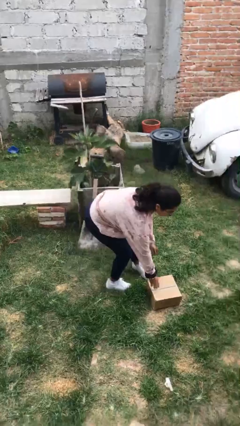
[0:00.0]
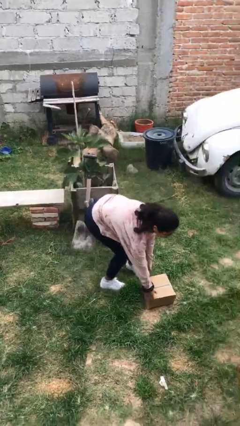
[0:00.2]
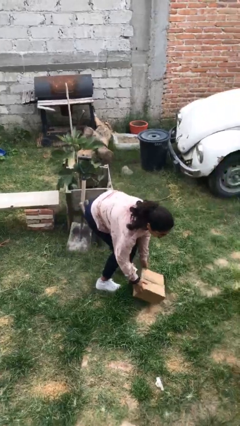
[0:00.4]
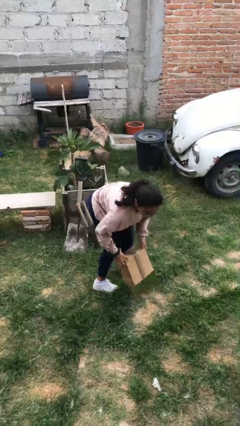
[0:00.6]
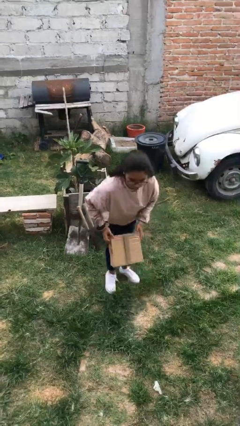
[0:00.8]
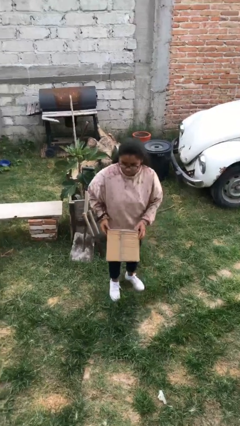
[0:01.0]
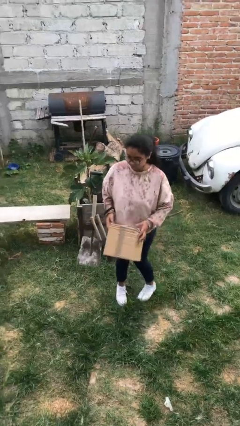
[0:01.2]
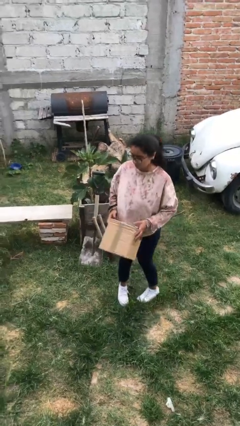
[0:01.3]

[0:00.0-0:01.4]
person picks up object from floor

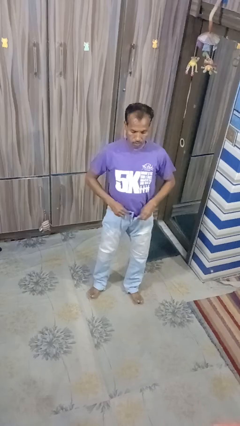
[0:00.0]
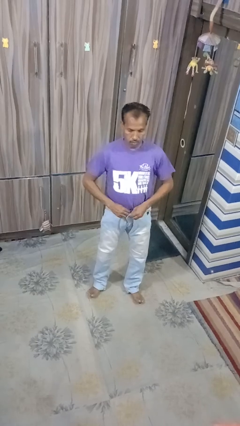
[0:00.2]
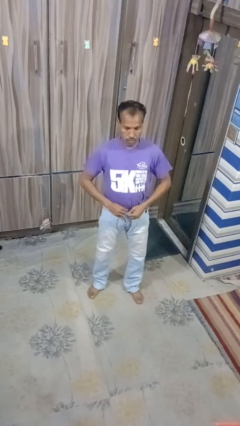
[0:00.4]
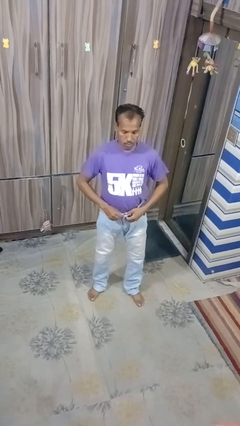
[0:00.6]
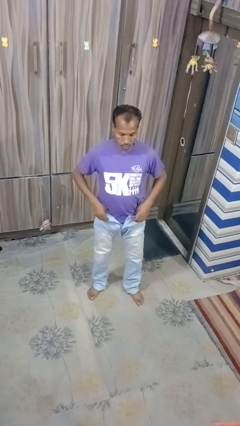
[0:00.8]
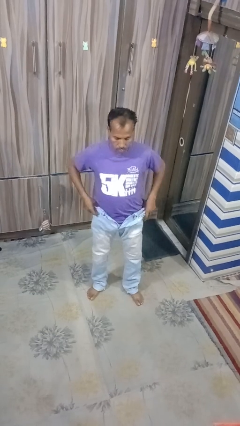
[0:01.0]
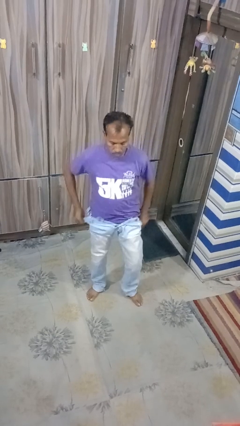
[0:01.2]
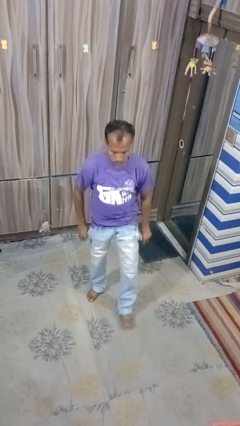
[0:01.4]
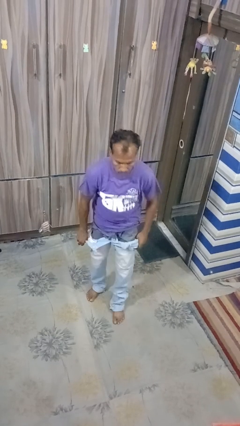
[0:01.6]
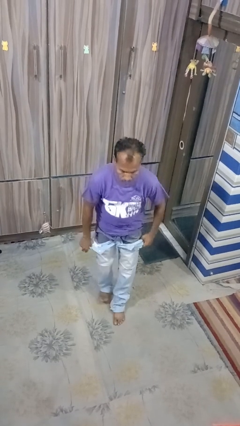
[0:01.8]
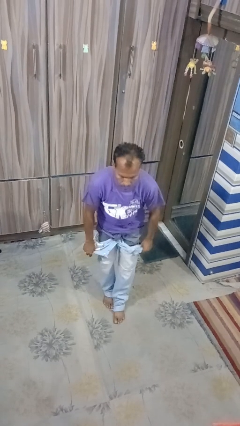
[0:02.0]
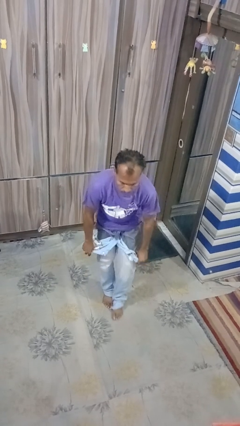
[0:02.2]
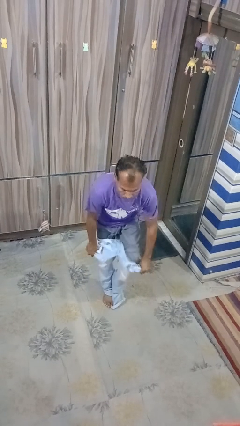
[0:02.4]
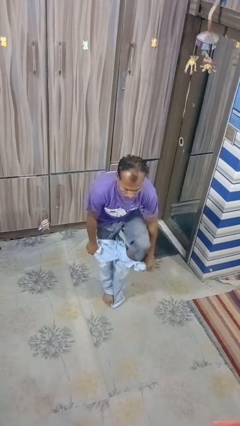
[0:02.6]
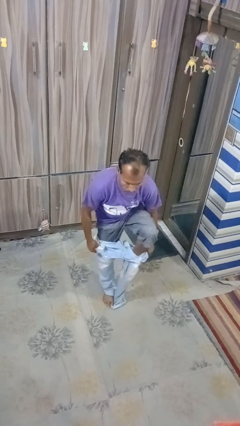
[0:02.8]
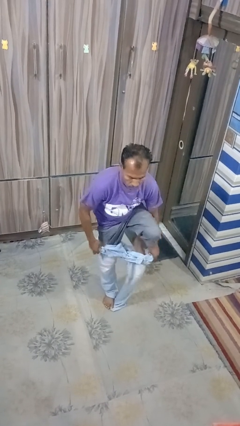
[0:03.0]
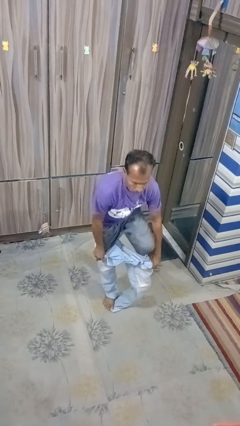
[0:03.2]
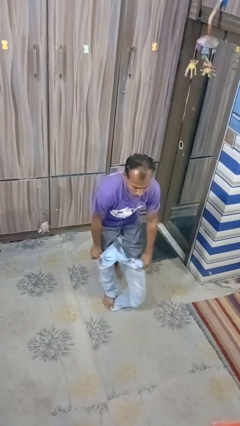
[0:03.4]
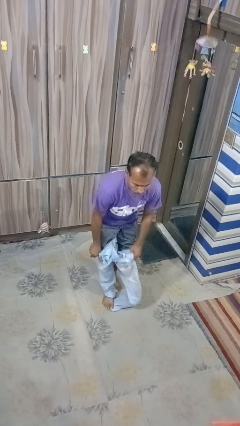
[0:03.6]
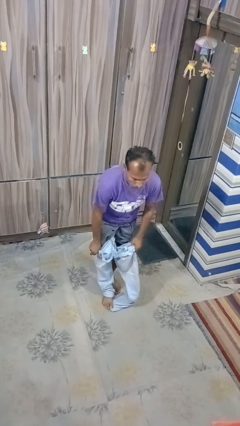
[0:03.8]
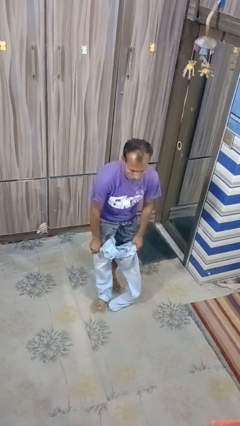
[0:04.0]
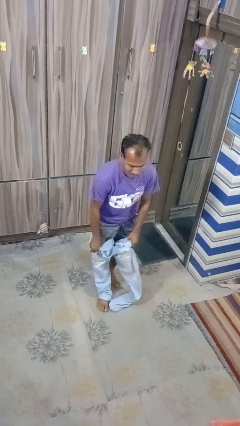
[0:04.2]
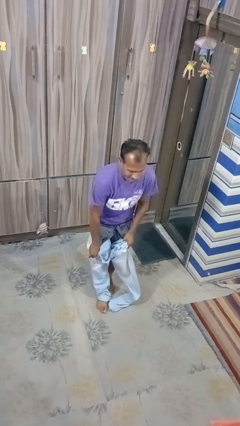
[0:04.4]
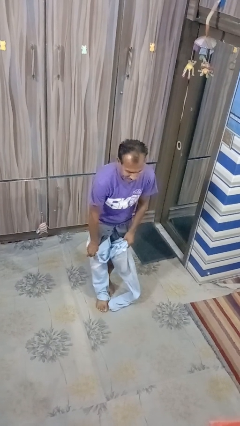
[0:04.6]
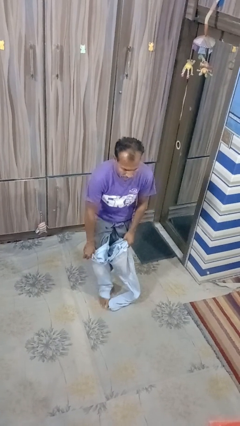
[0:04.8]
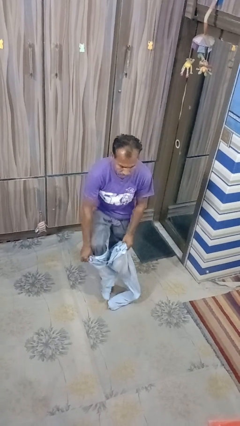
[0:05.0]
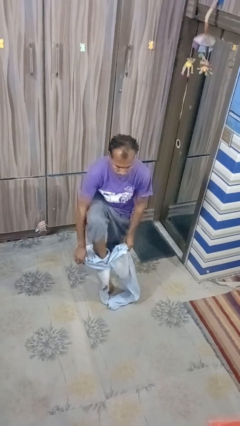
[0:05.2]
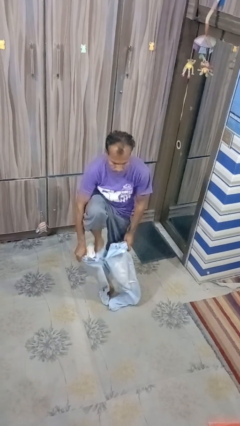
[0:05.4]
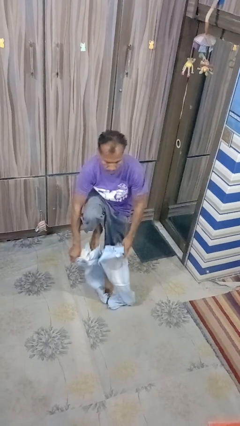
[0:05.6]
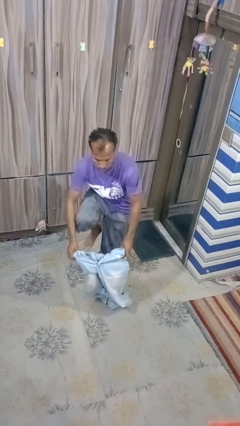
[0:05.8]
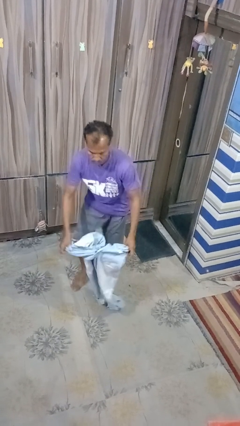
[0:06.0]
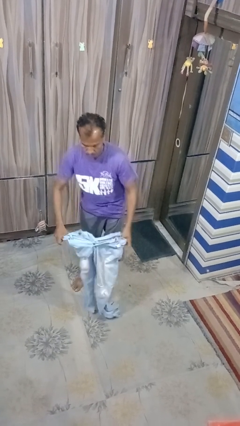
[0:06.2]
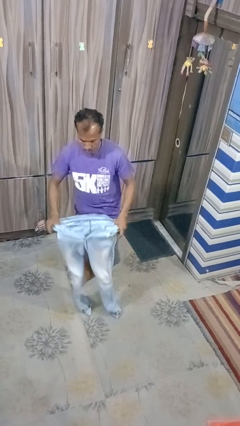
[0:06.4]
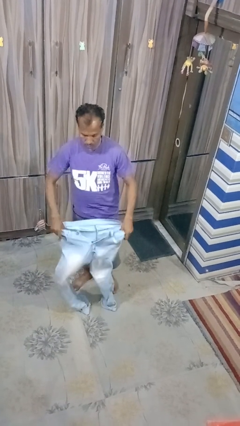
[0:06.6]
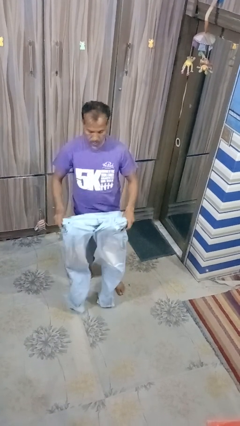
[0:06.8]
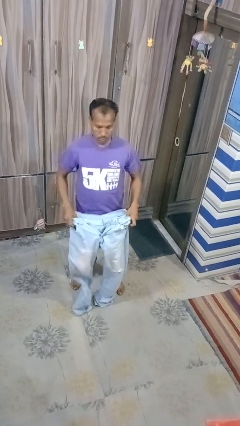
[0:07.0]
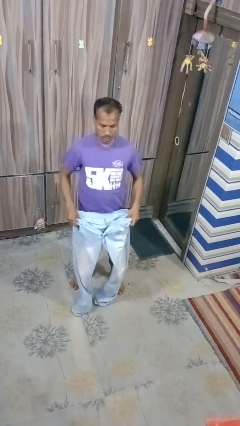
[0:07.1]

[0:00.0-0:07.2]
person takes off pants

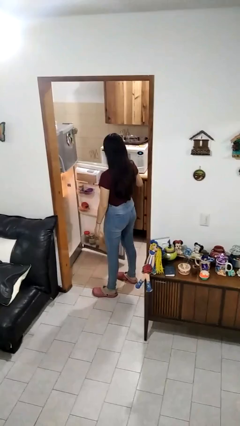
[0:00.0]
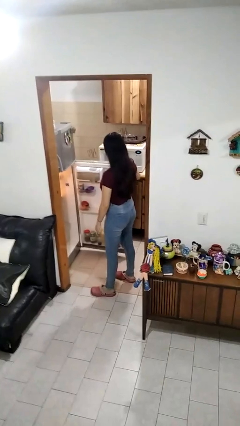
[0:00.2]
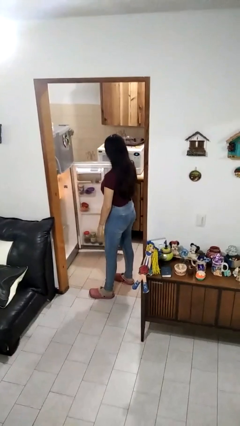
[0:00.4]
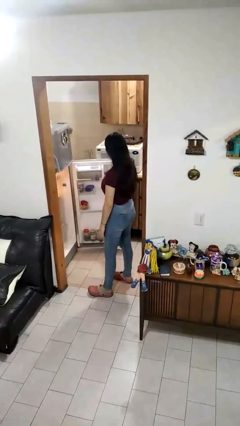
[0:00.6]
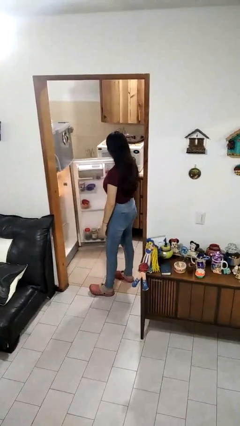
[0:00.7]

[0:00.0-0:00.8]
person opens refrigerator

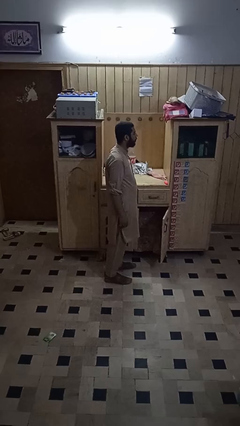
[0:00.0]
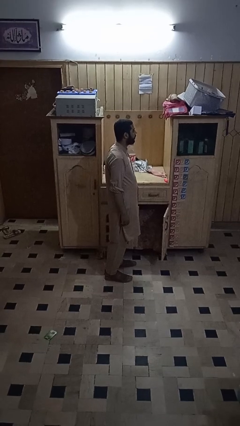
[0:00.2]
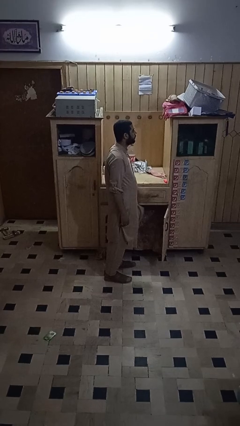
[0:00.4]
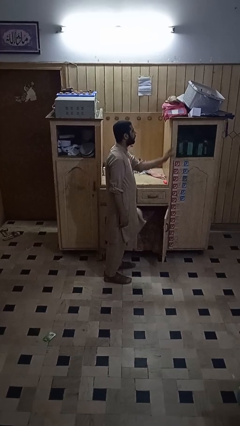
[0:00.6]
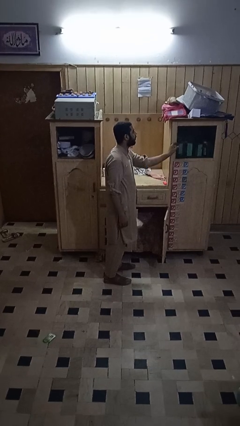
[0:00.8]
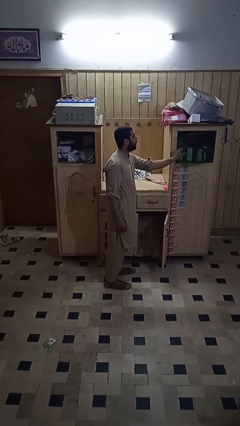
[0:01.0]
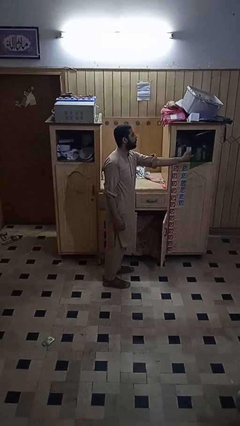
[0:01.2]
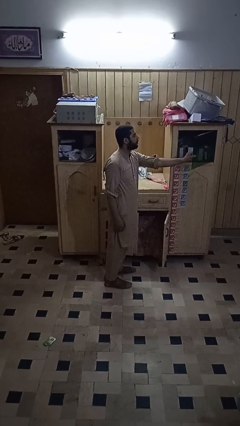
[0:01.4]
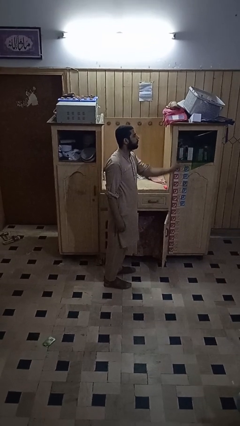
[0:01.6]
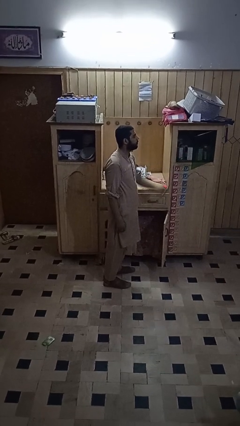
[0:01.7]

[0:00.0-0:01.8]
person closes cabinet

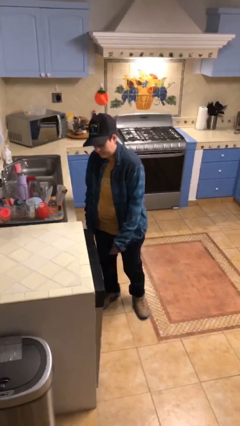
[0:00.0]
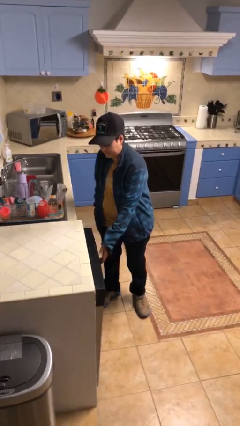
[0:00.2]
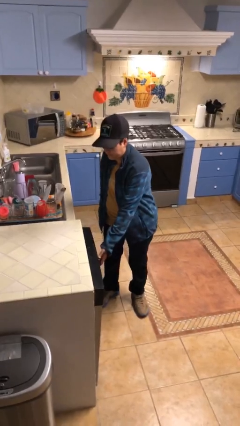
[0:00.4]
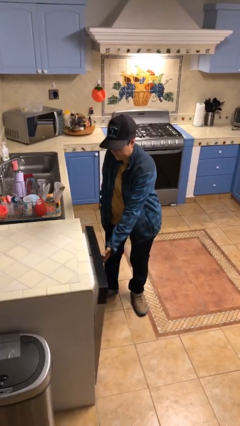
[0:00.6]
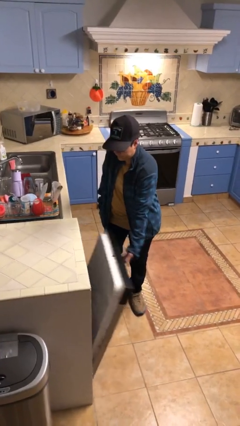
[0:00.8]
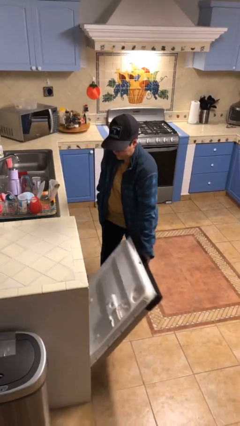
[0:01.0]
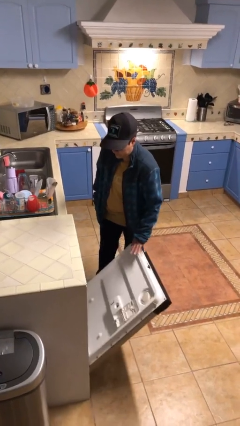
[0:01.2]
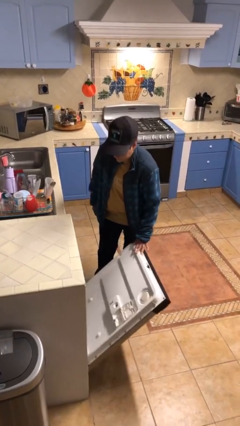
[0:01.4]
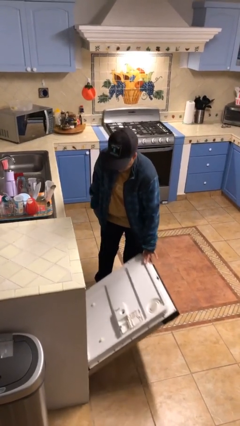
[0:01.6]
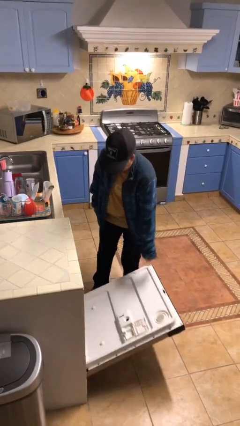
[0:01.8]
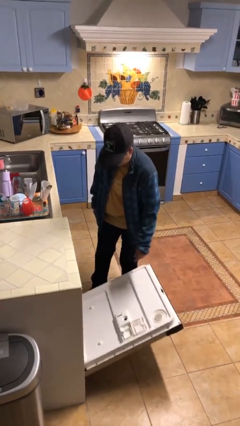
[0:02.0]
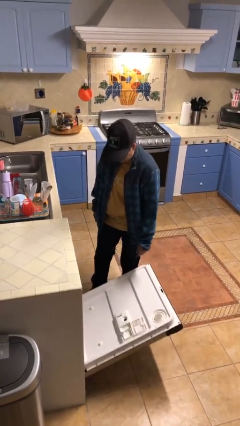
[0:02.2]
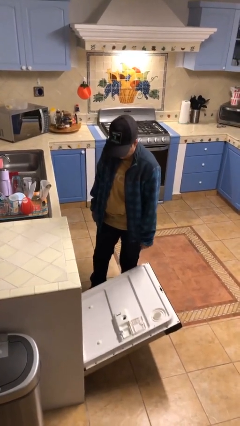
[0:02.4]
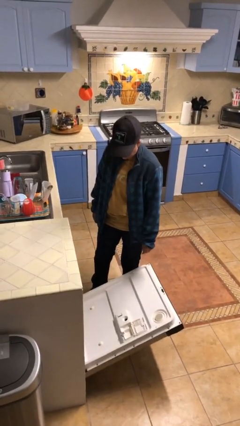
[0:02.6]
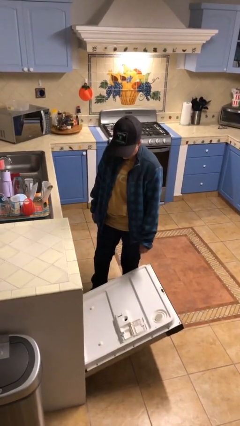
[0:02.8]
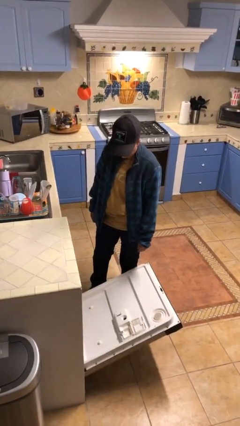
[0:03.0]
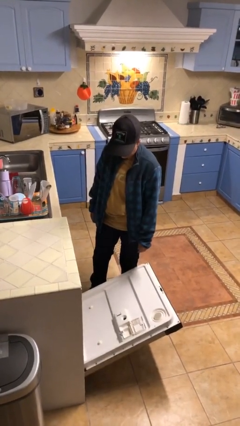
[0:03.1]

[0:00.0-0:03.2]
person opens dishwasher

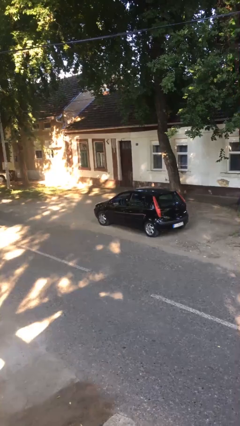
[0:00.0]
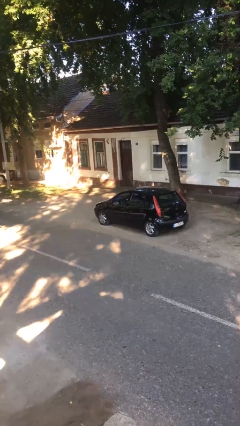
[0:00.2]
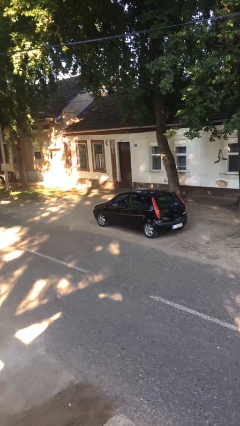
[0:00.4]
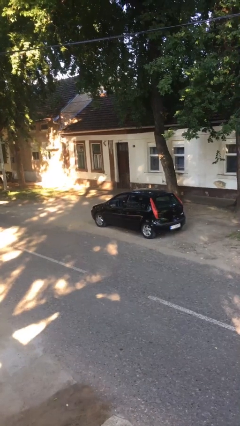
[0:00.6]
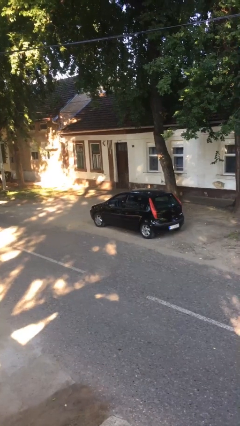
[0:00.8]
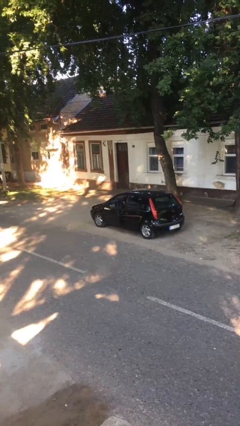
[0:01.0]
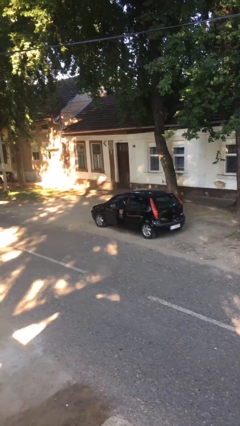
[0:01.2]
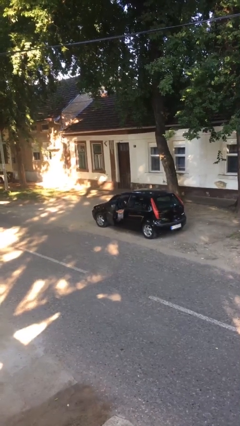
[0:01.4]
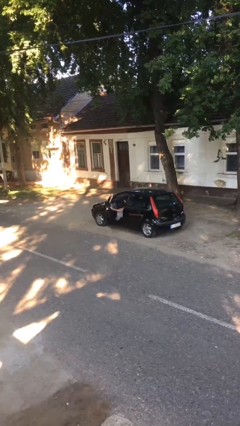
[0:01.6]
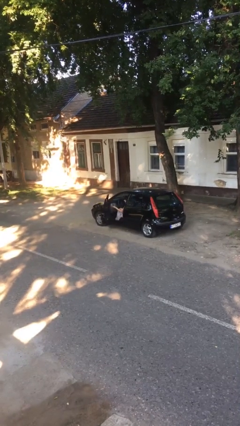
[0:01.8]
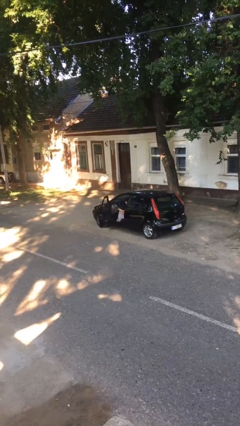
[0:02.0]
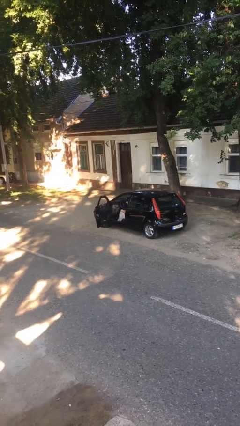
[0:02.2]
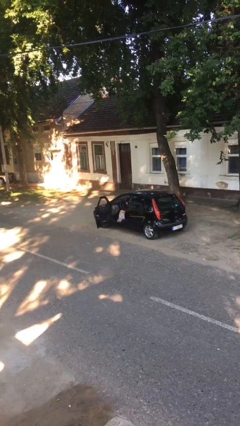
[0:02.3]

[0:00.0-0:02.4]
person opens car door

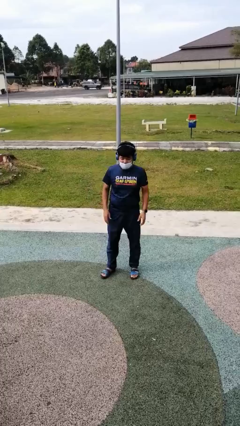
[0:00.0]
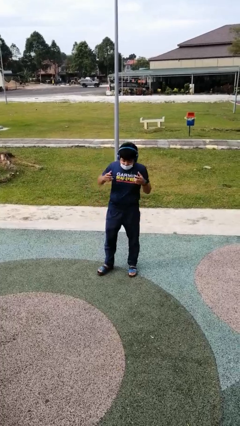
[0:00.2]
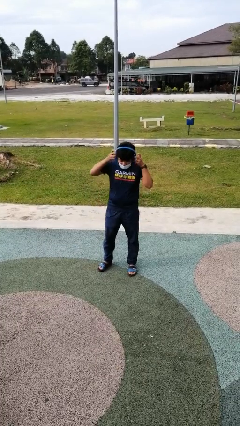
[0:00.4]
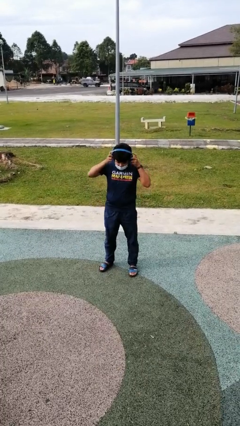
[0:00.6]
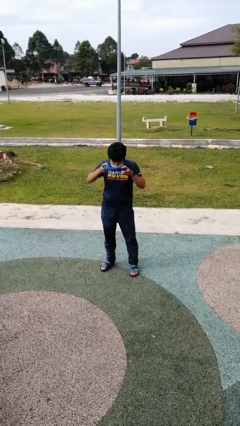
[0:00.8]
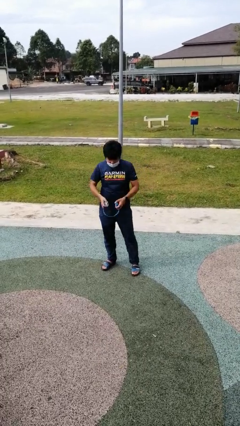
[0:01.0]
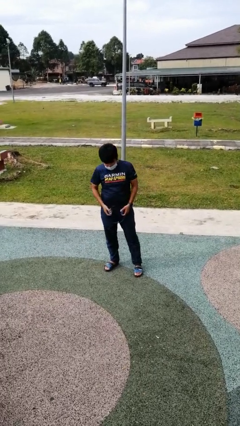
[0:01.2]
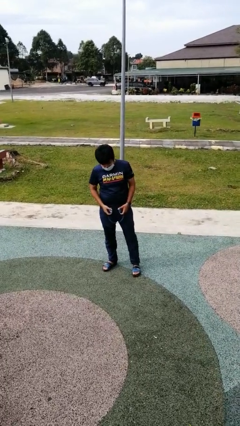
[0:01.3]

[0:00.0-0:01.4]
person takes off headphones
